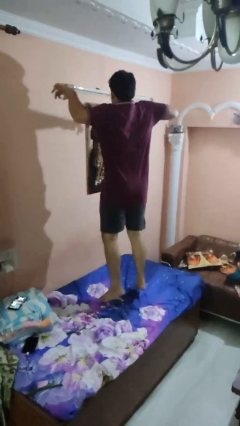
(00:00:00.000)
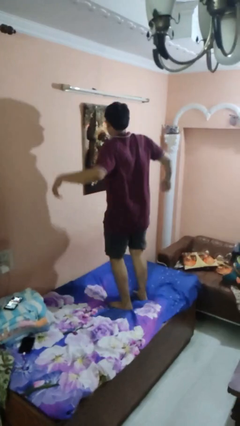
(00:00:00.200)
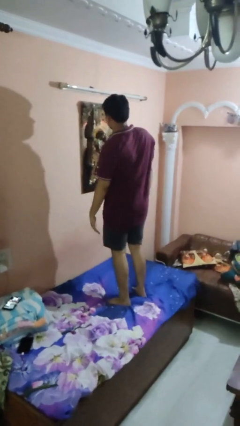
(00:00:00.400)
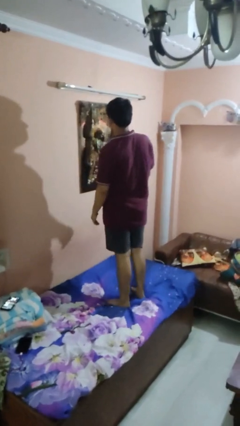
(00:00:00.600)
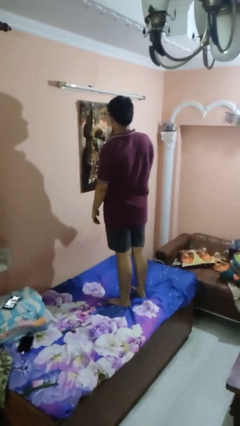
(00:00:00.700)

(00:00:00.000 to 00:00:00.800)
person jumps on bed

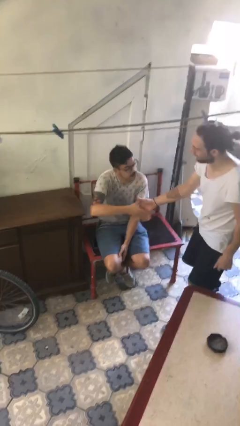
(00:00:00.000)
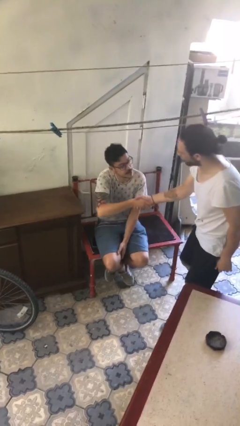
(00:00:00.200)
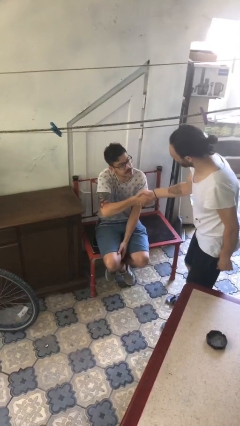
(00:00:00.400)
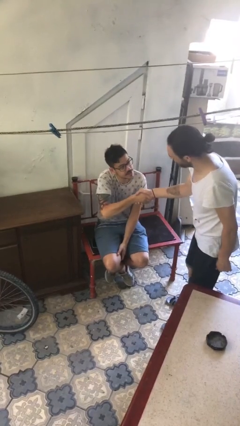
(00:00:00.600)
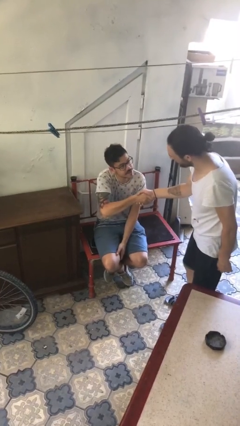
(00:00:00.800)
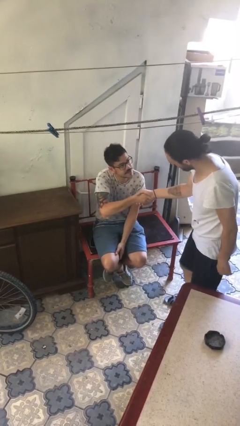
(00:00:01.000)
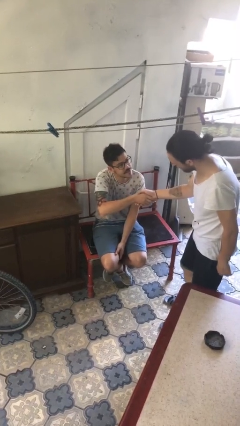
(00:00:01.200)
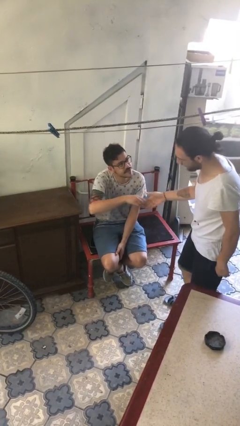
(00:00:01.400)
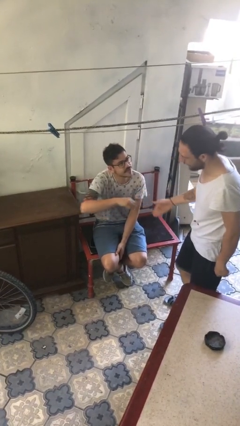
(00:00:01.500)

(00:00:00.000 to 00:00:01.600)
person shakes hand

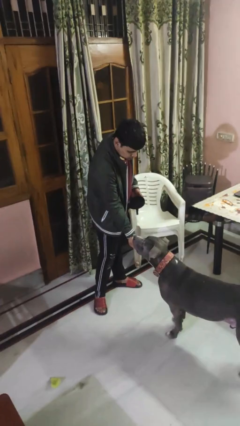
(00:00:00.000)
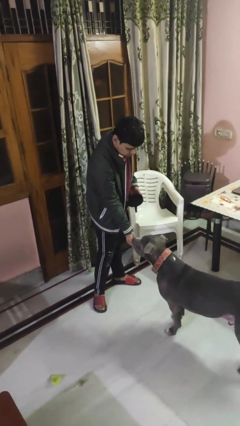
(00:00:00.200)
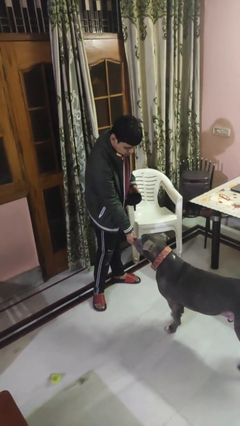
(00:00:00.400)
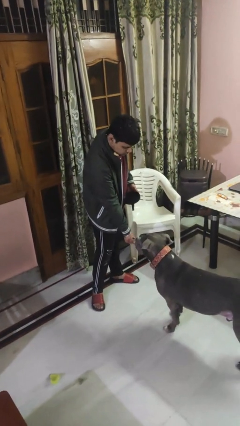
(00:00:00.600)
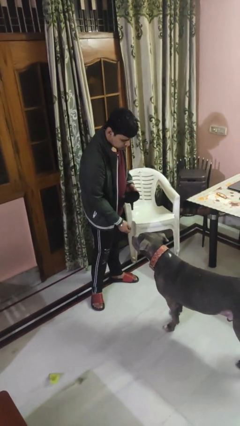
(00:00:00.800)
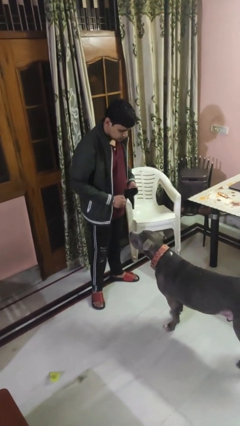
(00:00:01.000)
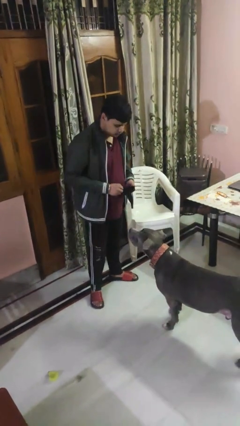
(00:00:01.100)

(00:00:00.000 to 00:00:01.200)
person feeds dog

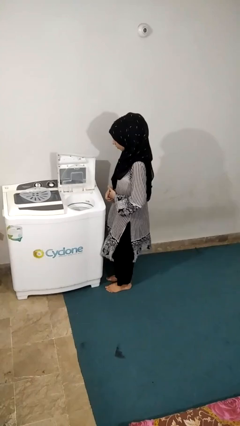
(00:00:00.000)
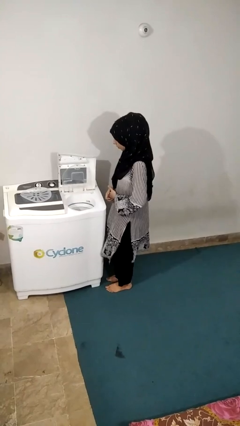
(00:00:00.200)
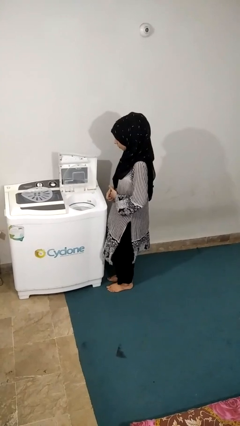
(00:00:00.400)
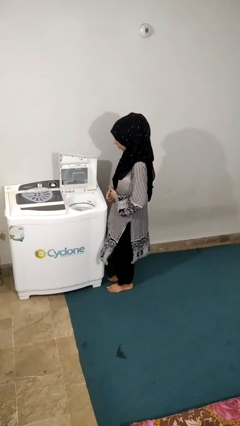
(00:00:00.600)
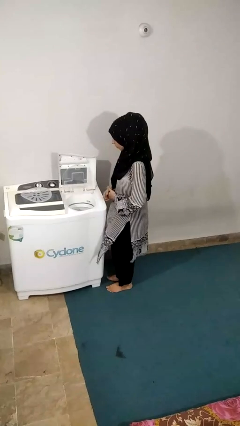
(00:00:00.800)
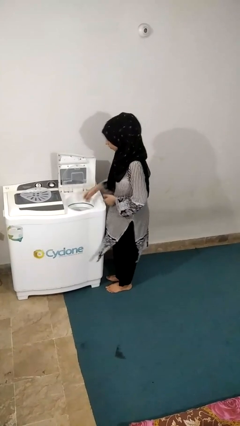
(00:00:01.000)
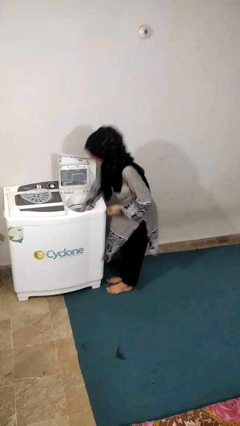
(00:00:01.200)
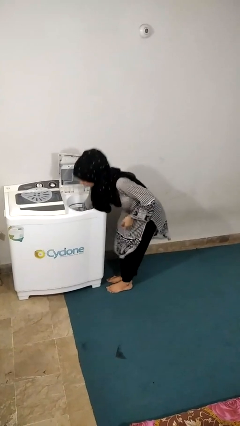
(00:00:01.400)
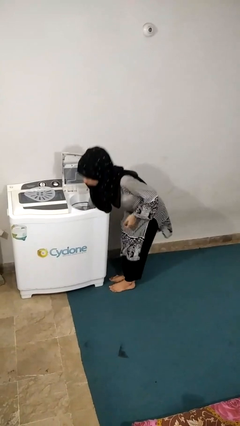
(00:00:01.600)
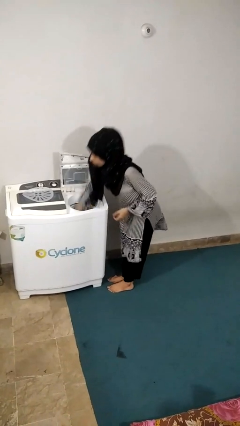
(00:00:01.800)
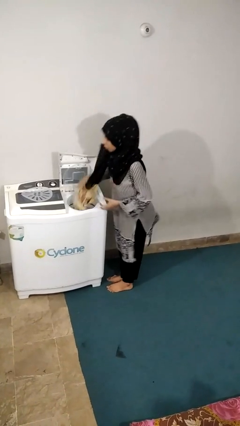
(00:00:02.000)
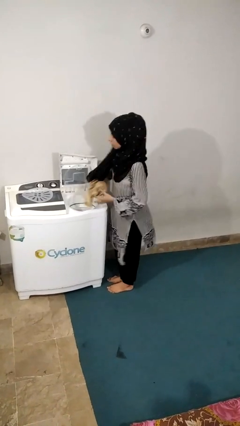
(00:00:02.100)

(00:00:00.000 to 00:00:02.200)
person unloads dryer

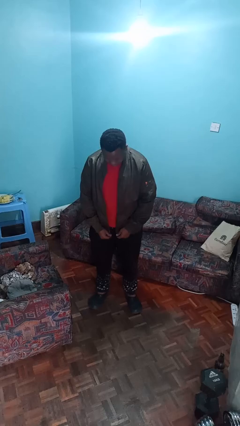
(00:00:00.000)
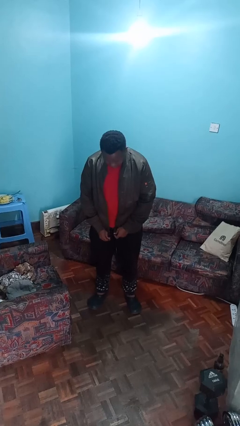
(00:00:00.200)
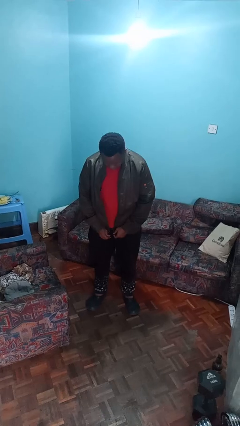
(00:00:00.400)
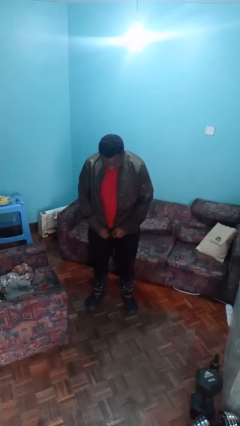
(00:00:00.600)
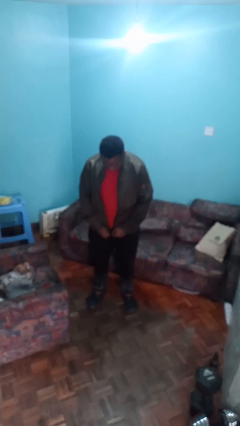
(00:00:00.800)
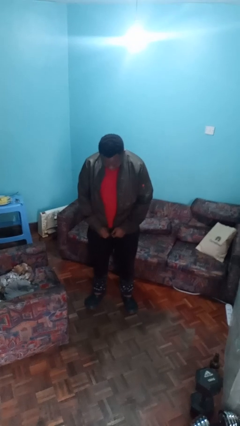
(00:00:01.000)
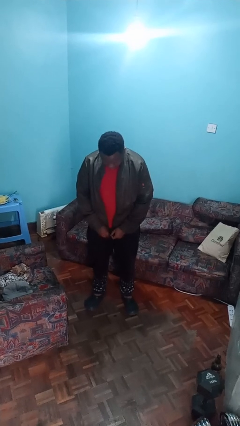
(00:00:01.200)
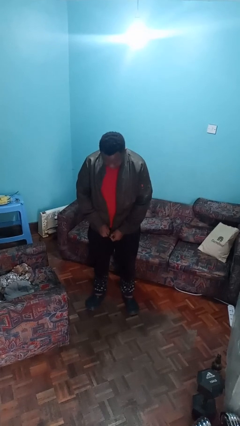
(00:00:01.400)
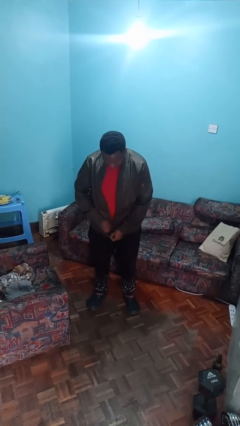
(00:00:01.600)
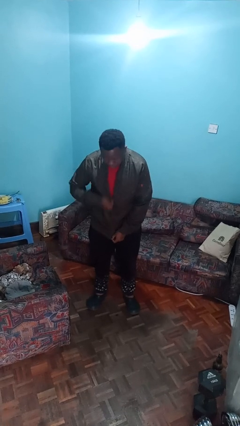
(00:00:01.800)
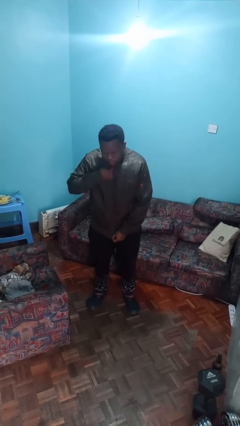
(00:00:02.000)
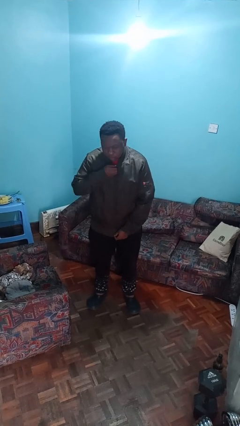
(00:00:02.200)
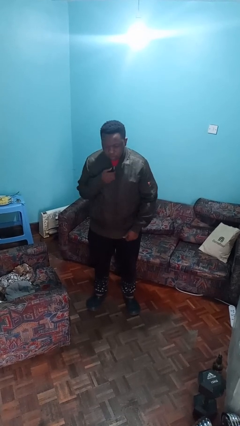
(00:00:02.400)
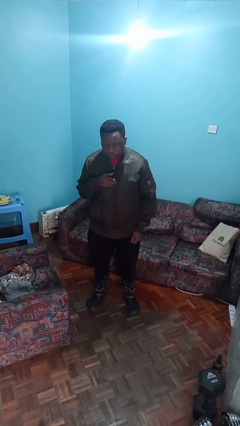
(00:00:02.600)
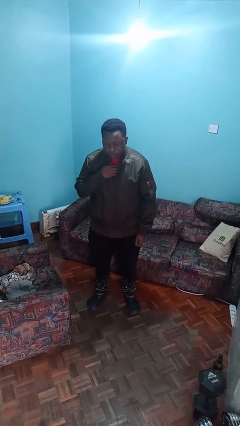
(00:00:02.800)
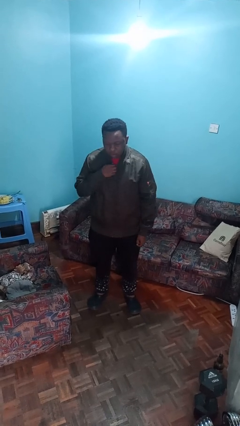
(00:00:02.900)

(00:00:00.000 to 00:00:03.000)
person zips up jacket

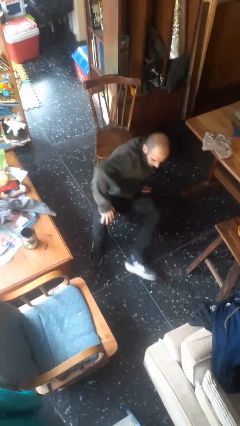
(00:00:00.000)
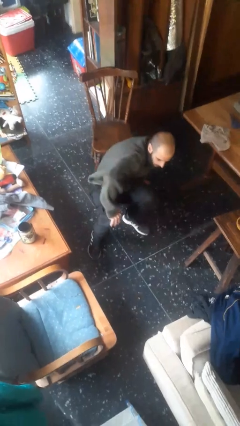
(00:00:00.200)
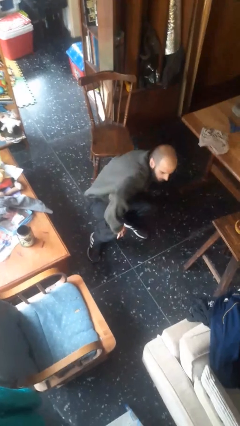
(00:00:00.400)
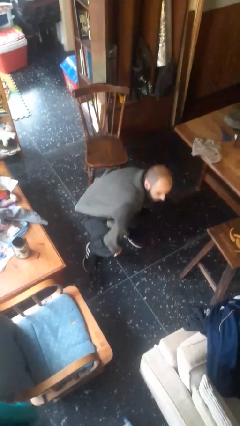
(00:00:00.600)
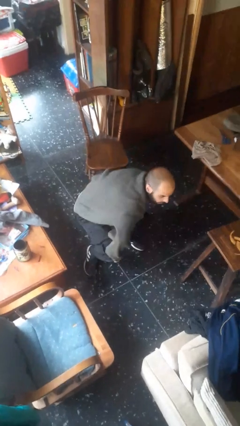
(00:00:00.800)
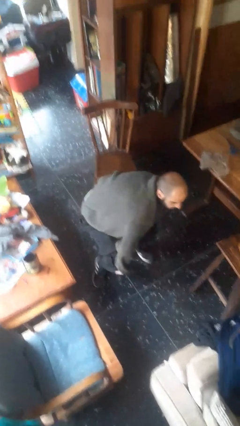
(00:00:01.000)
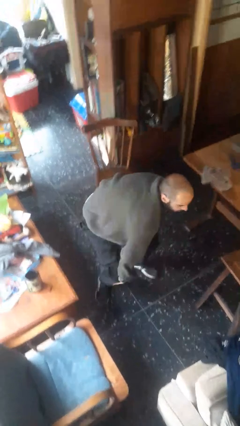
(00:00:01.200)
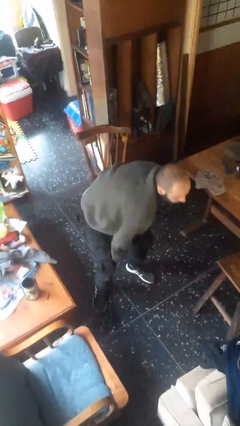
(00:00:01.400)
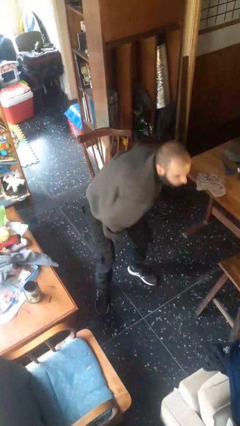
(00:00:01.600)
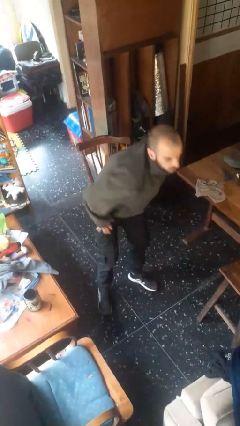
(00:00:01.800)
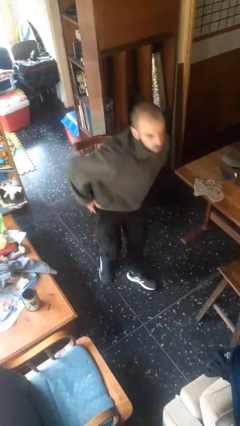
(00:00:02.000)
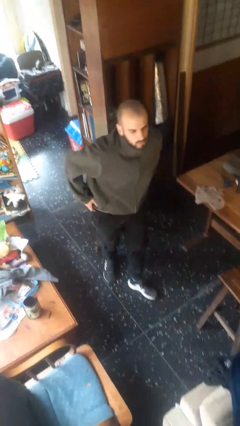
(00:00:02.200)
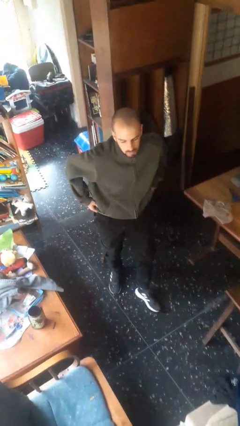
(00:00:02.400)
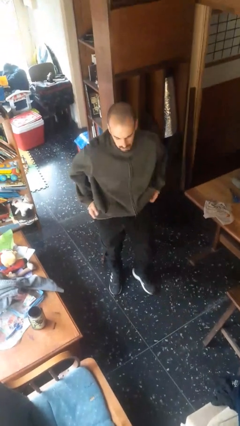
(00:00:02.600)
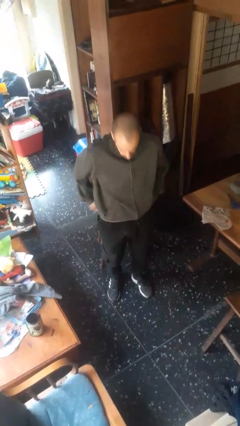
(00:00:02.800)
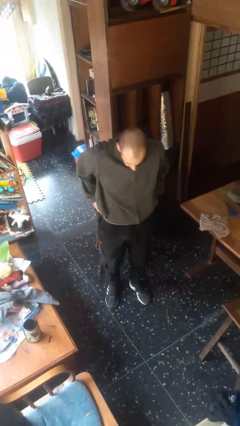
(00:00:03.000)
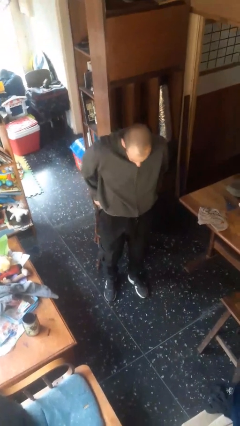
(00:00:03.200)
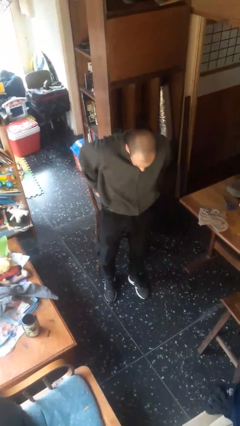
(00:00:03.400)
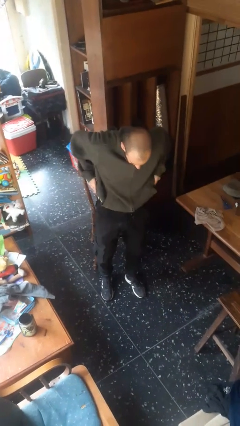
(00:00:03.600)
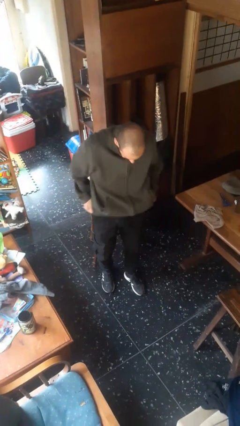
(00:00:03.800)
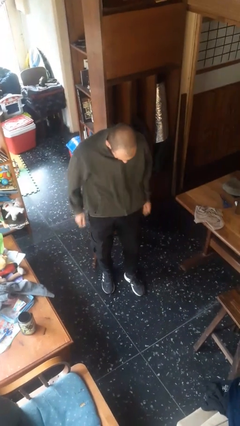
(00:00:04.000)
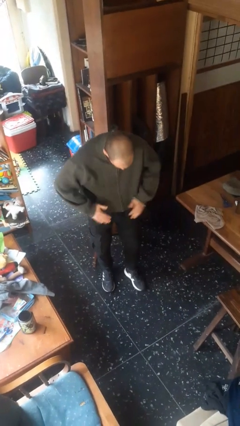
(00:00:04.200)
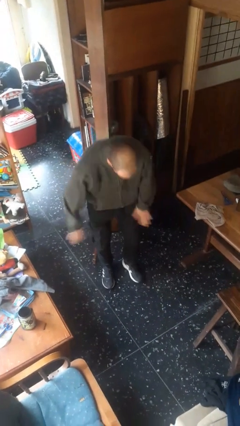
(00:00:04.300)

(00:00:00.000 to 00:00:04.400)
person stands up from floor

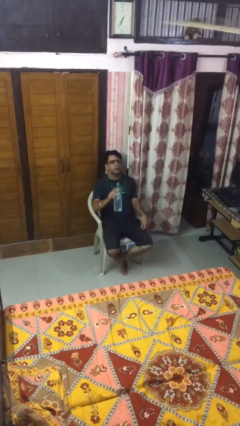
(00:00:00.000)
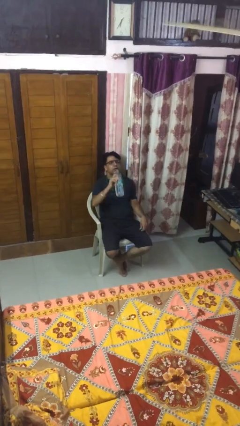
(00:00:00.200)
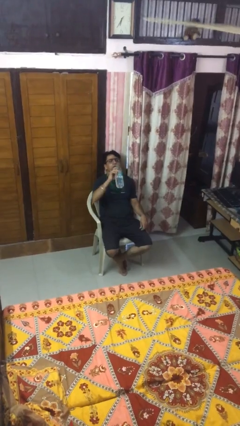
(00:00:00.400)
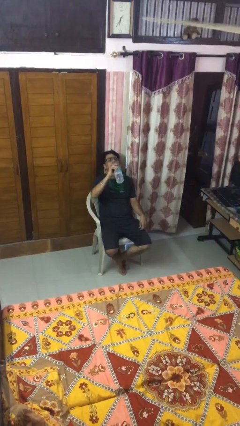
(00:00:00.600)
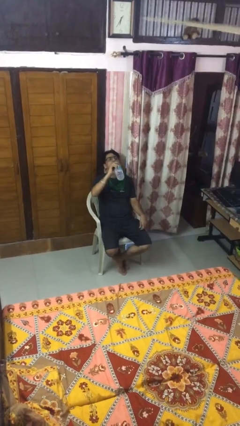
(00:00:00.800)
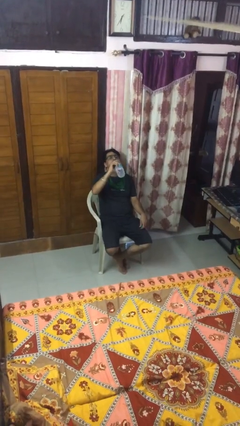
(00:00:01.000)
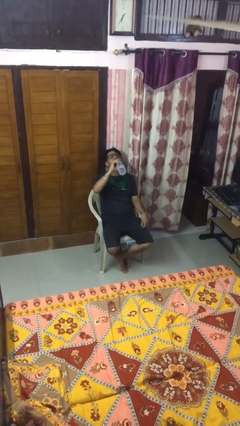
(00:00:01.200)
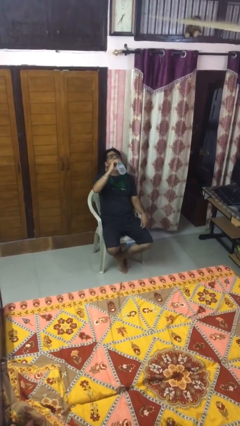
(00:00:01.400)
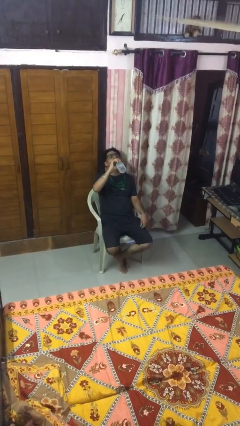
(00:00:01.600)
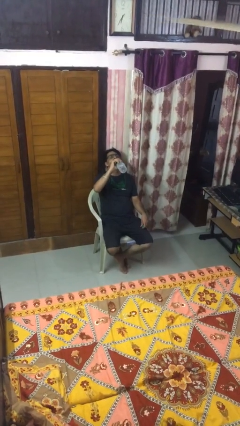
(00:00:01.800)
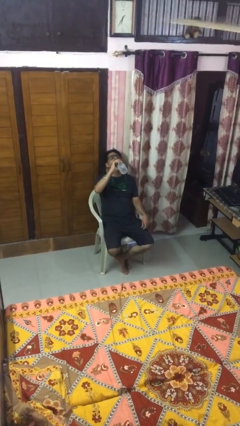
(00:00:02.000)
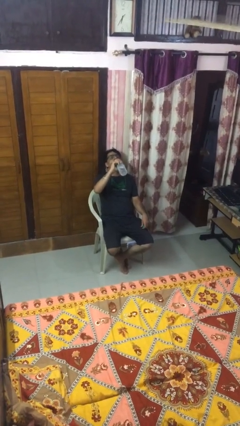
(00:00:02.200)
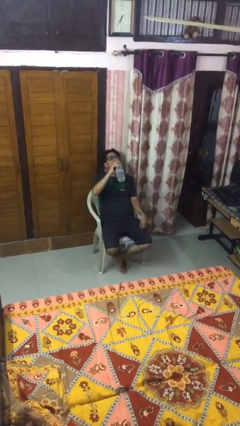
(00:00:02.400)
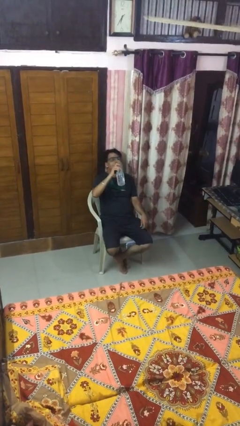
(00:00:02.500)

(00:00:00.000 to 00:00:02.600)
person drinks from bottle

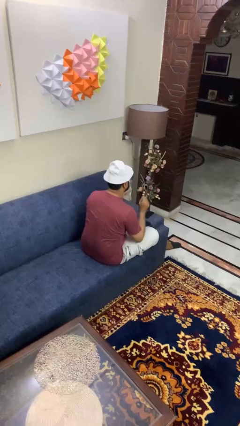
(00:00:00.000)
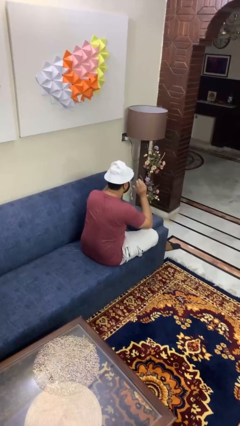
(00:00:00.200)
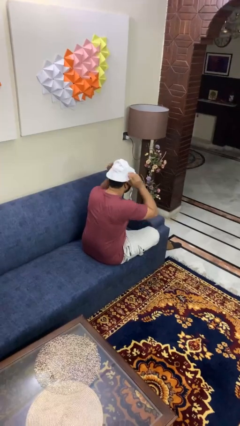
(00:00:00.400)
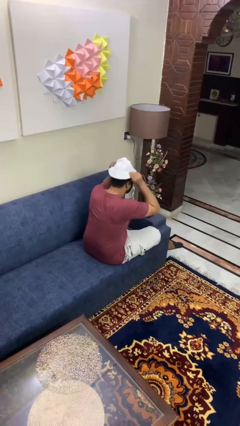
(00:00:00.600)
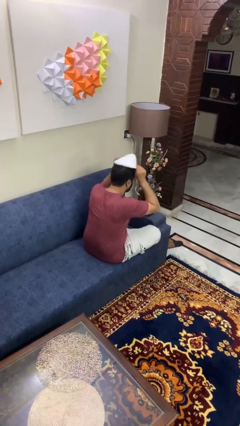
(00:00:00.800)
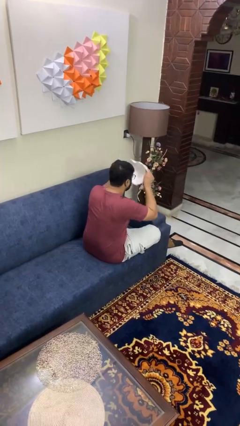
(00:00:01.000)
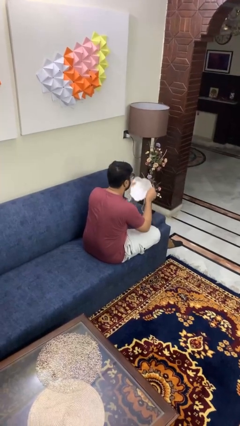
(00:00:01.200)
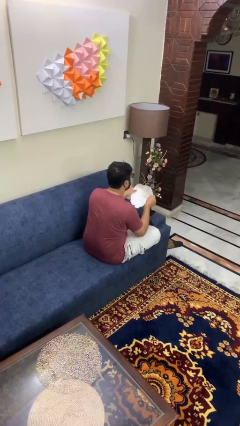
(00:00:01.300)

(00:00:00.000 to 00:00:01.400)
person takes off hat
